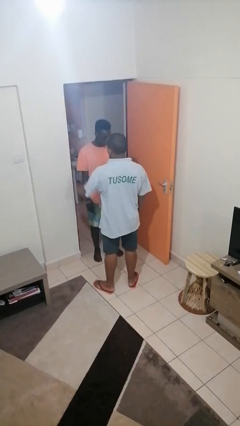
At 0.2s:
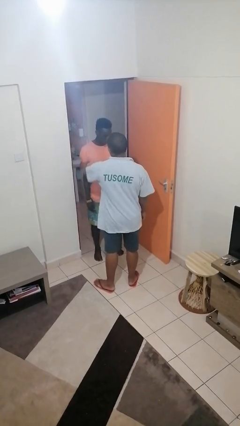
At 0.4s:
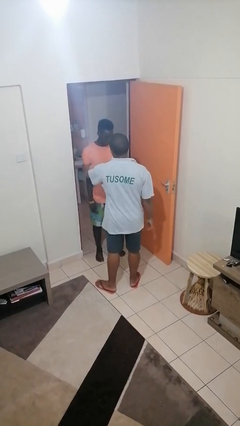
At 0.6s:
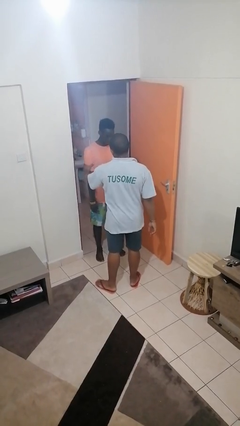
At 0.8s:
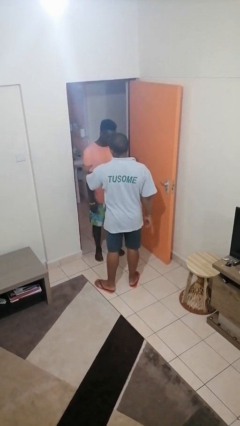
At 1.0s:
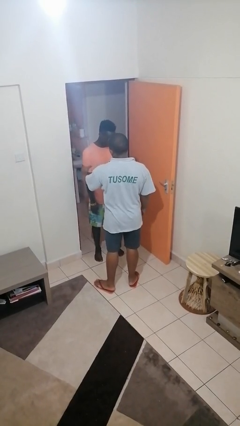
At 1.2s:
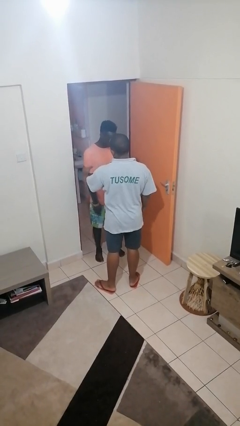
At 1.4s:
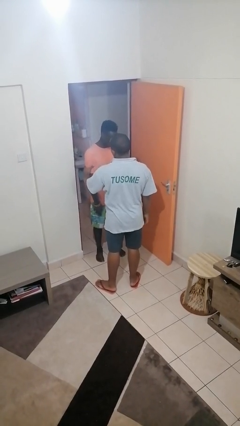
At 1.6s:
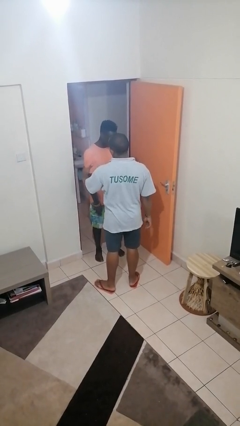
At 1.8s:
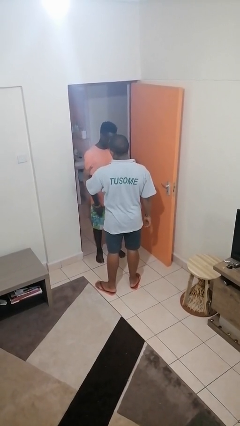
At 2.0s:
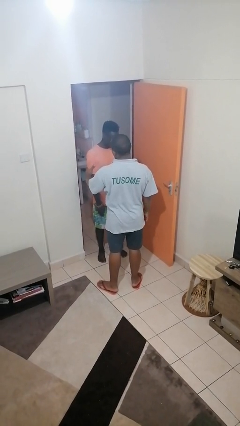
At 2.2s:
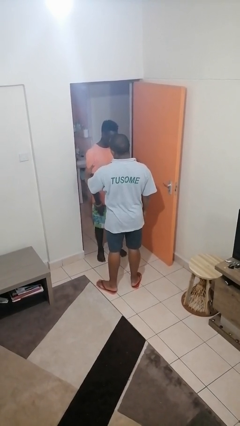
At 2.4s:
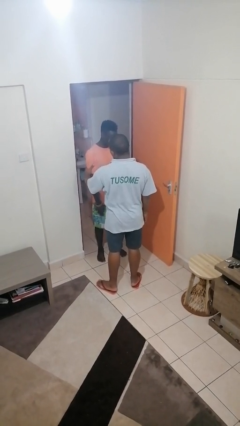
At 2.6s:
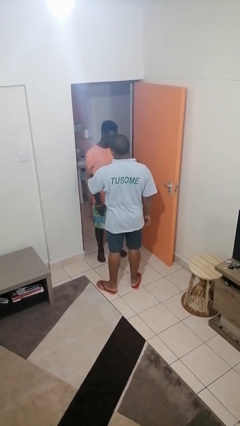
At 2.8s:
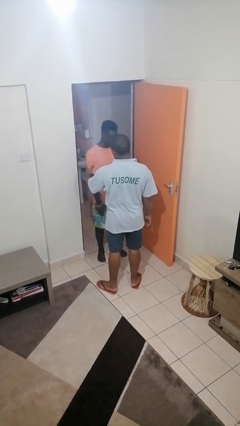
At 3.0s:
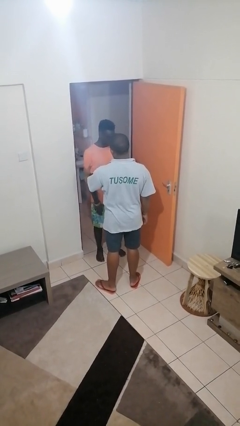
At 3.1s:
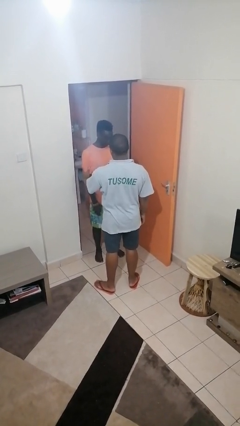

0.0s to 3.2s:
person grabs person by bicep

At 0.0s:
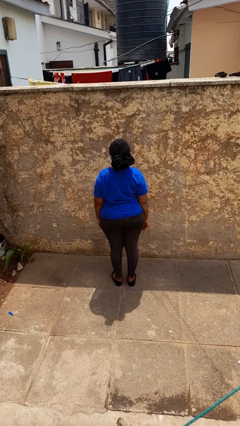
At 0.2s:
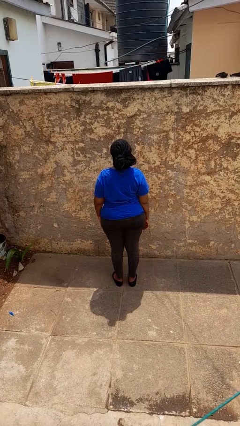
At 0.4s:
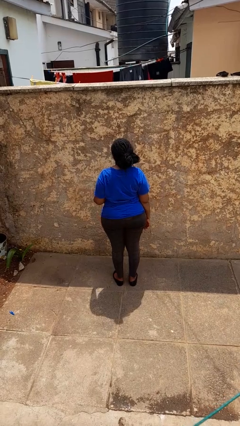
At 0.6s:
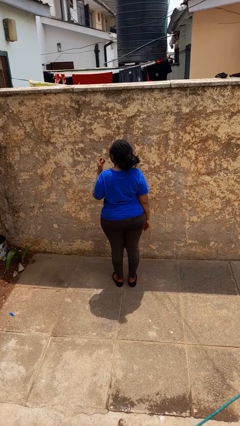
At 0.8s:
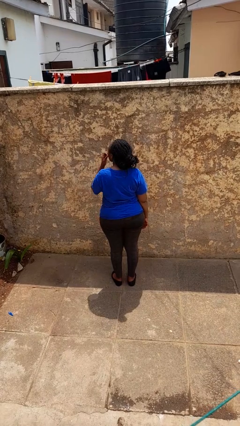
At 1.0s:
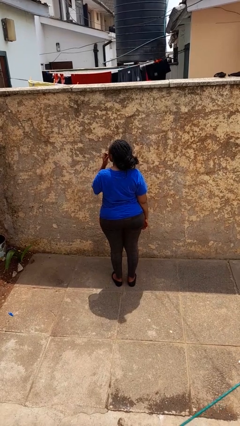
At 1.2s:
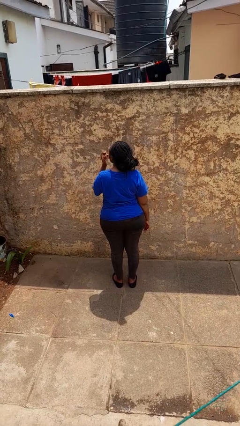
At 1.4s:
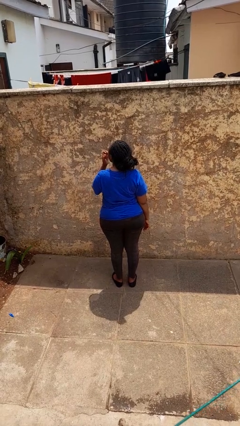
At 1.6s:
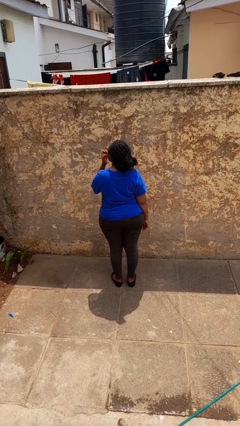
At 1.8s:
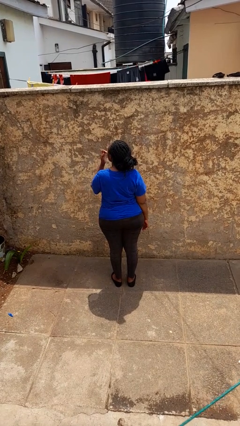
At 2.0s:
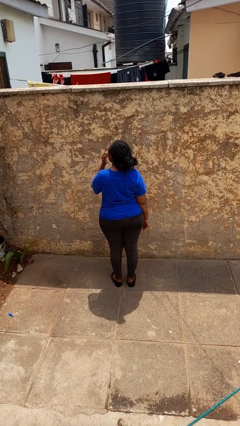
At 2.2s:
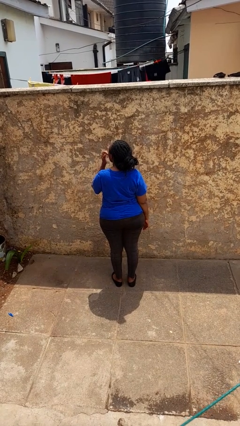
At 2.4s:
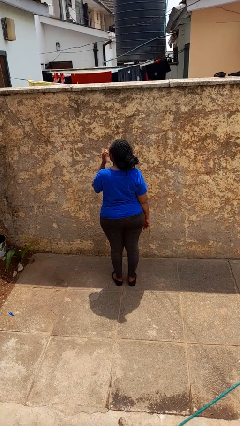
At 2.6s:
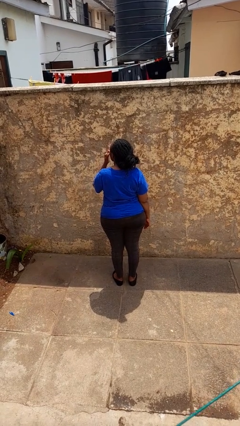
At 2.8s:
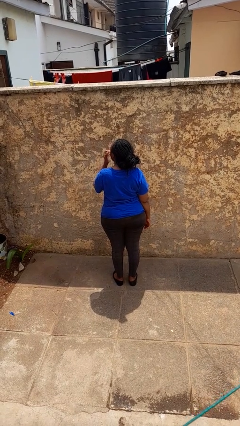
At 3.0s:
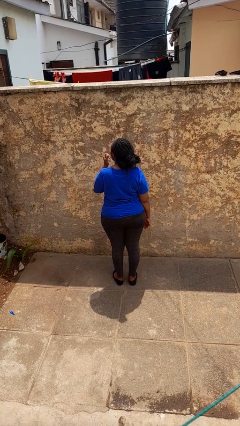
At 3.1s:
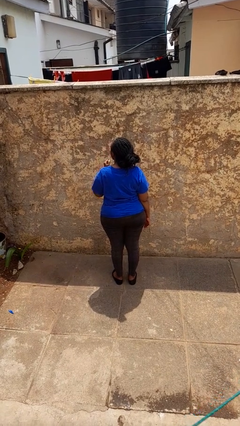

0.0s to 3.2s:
person licks fingers

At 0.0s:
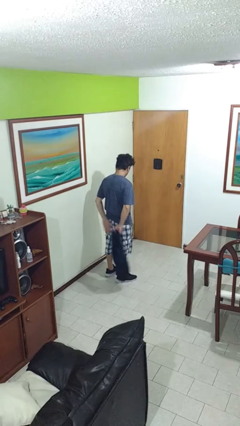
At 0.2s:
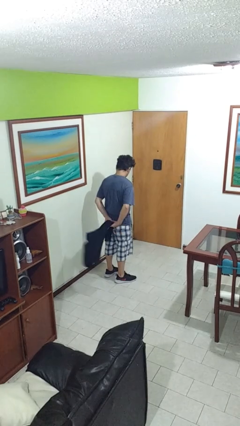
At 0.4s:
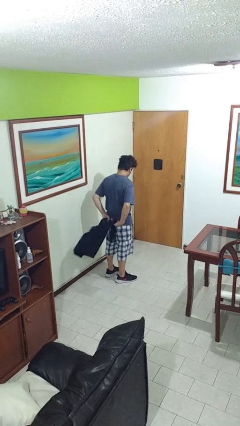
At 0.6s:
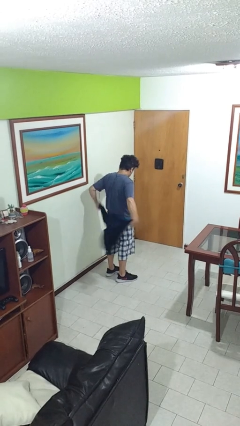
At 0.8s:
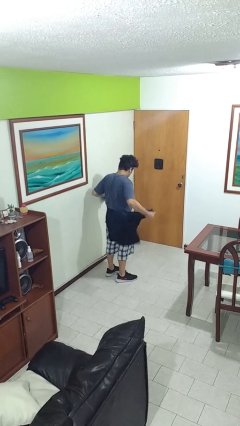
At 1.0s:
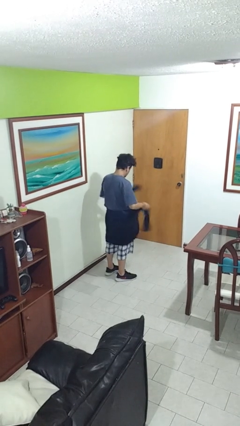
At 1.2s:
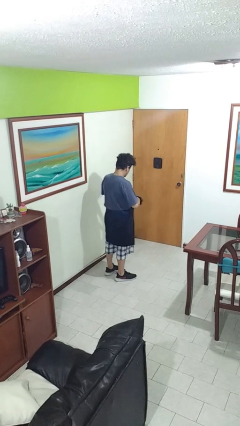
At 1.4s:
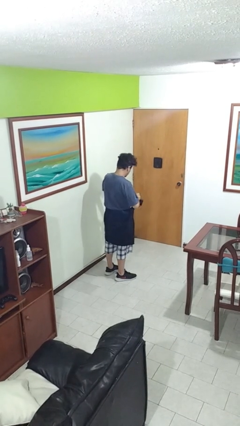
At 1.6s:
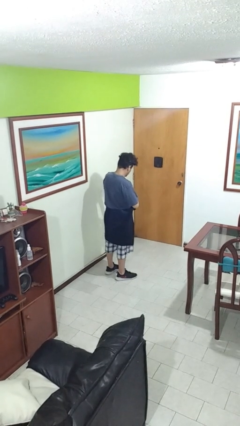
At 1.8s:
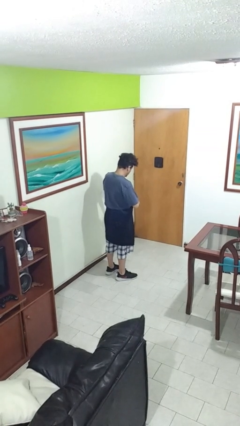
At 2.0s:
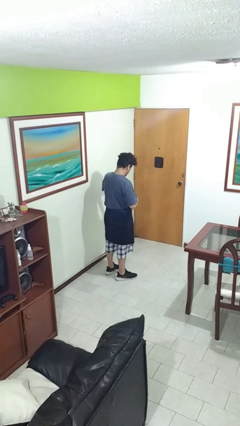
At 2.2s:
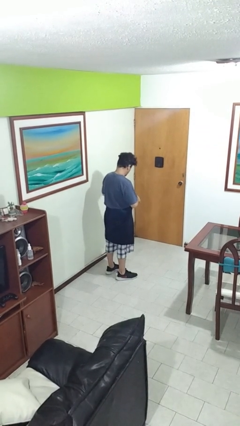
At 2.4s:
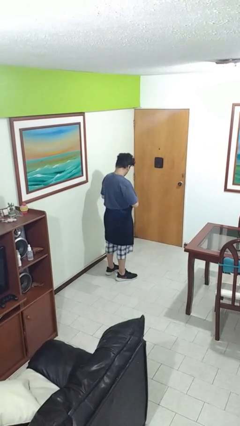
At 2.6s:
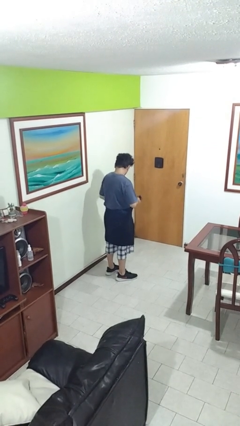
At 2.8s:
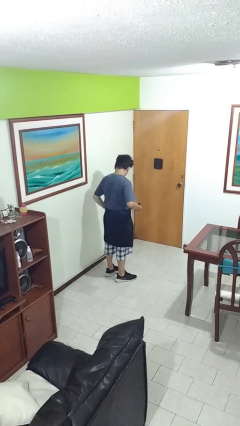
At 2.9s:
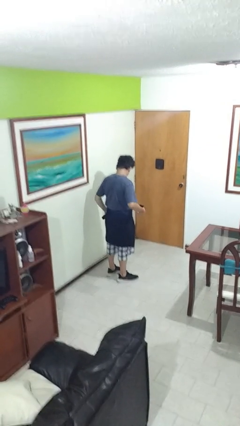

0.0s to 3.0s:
person ties jacket around waist

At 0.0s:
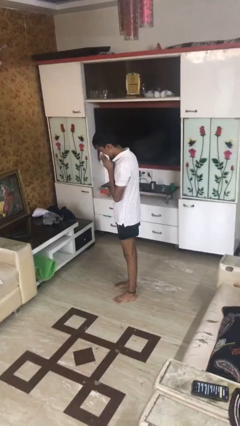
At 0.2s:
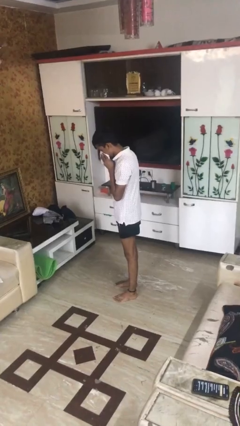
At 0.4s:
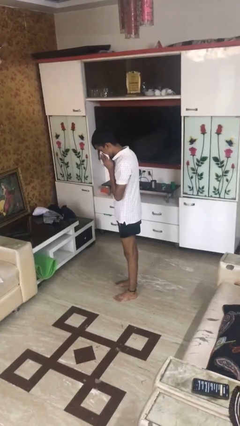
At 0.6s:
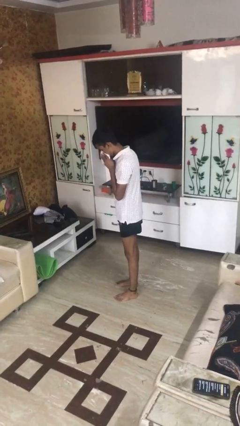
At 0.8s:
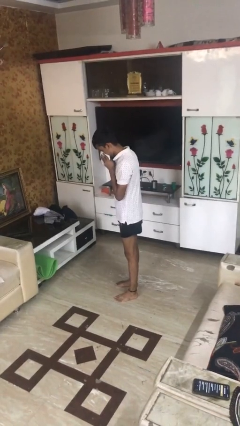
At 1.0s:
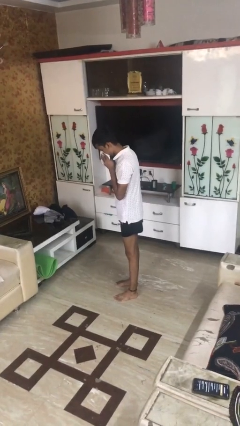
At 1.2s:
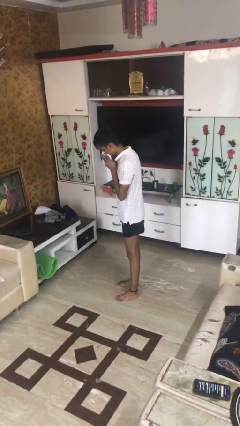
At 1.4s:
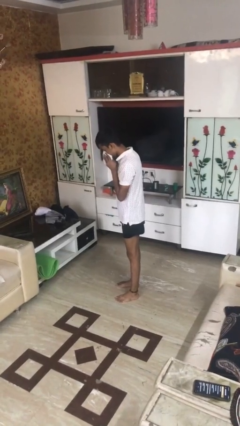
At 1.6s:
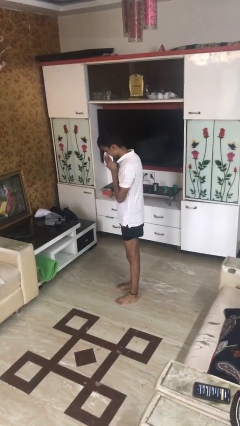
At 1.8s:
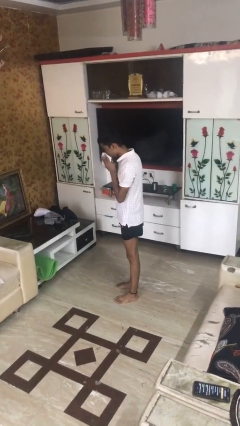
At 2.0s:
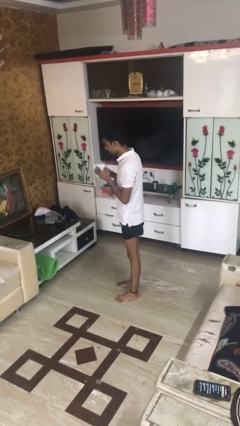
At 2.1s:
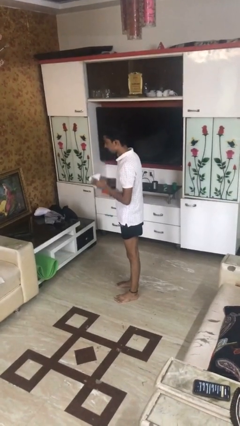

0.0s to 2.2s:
person blows nose

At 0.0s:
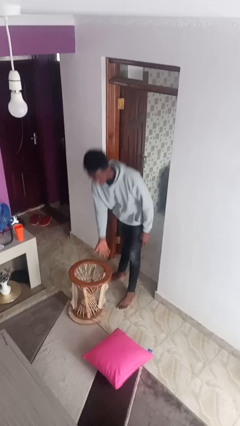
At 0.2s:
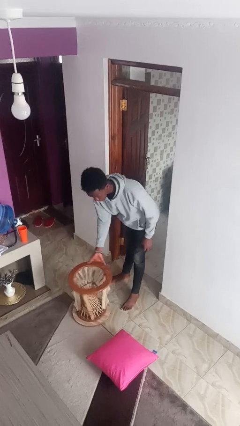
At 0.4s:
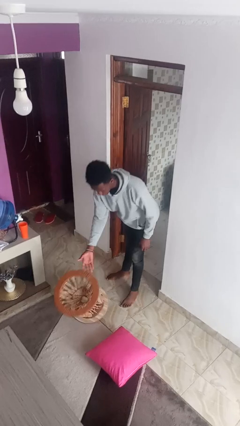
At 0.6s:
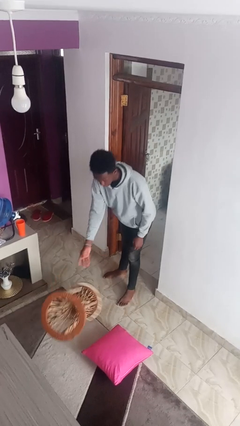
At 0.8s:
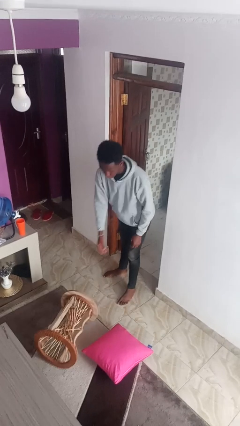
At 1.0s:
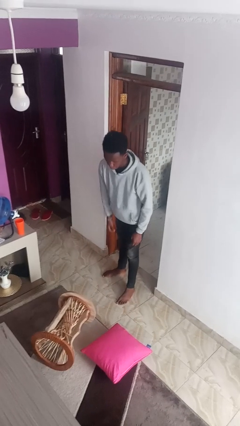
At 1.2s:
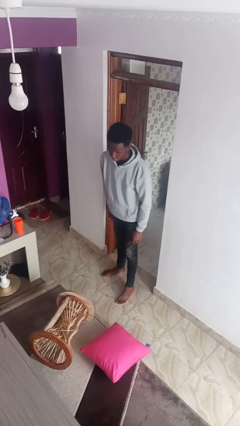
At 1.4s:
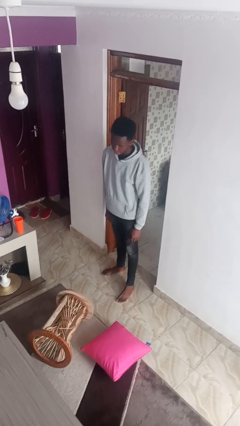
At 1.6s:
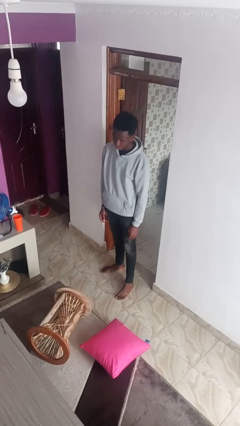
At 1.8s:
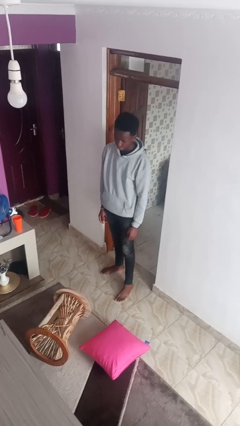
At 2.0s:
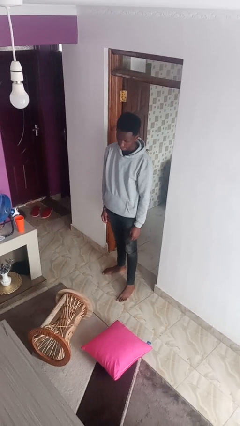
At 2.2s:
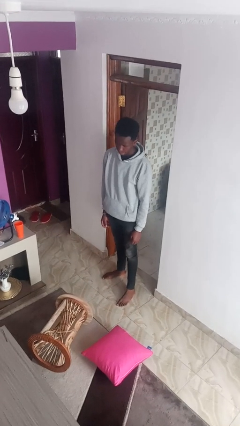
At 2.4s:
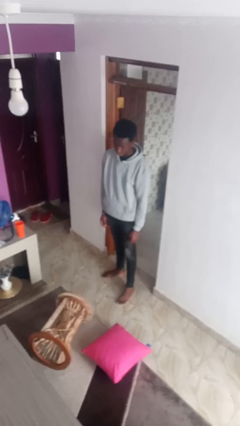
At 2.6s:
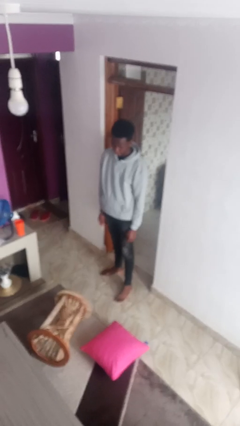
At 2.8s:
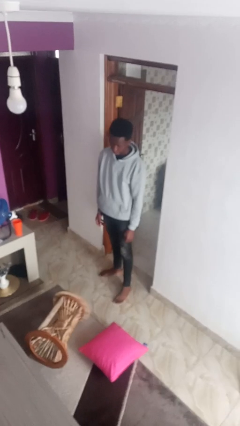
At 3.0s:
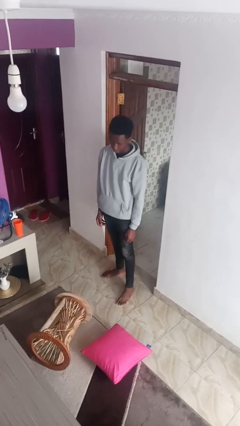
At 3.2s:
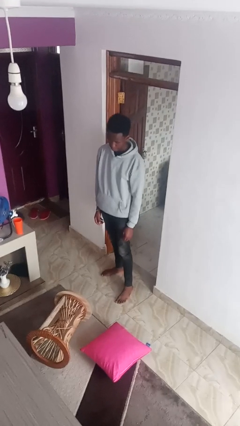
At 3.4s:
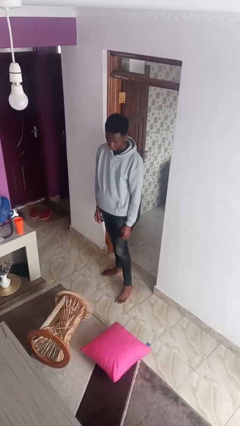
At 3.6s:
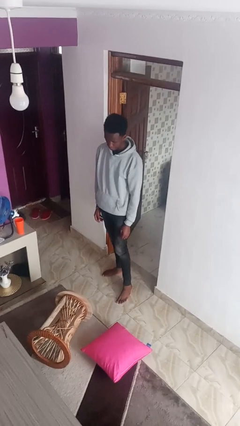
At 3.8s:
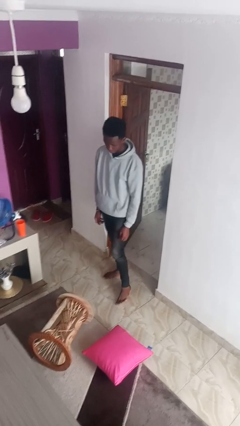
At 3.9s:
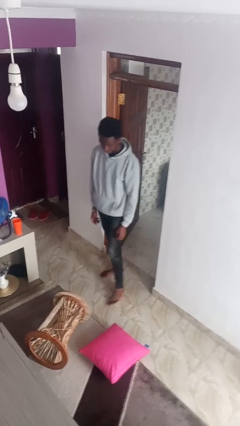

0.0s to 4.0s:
person knocks over furniture

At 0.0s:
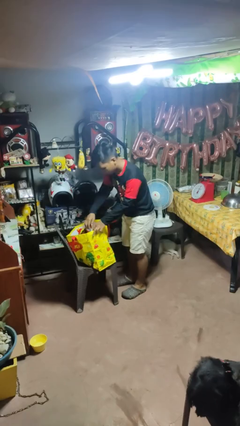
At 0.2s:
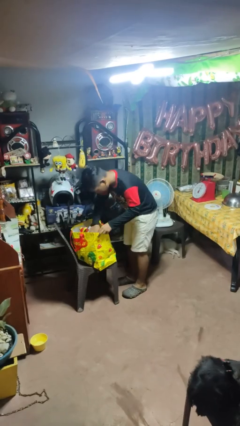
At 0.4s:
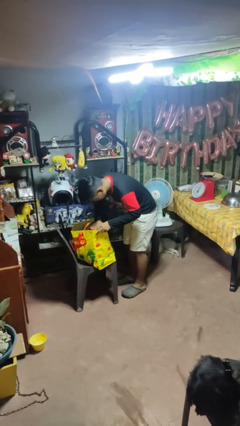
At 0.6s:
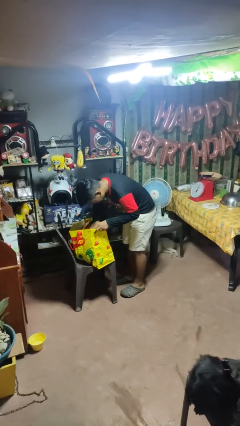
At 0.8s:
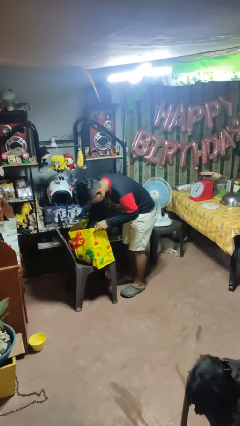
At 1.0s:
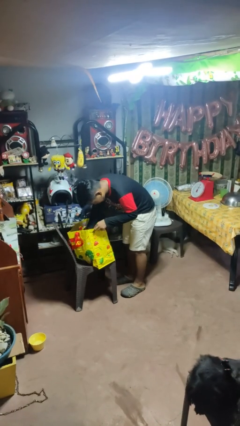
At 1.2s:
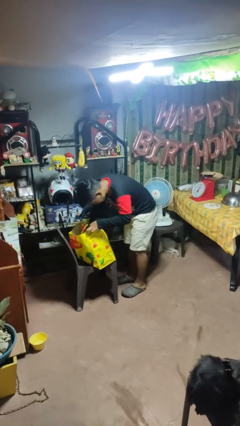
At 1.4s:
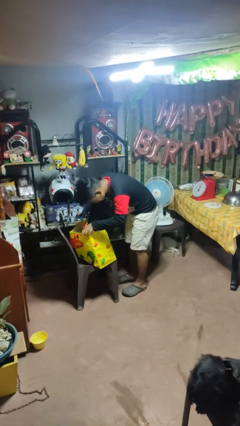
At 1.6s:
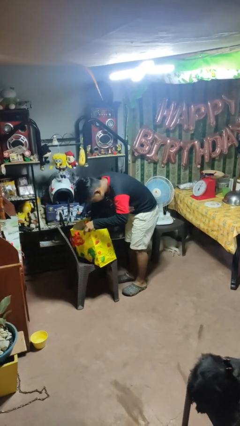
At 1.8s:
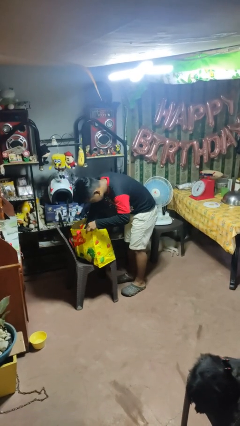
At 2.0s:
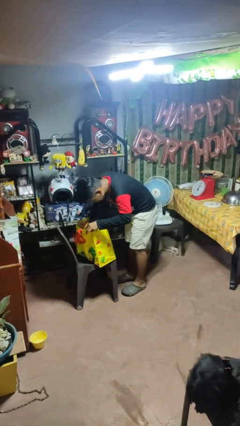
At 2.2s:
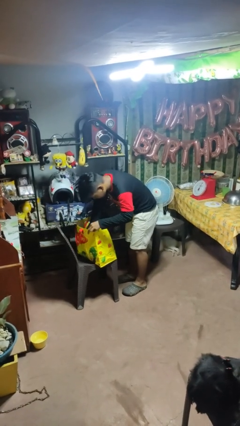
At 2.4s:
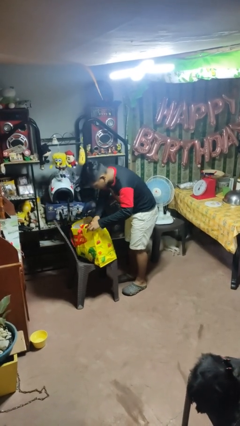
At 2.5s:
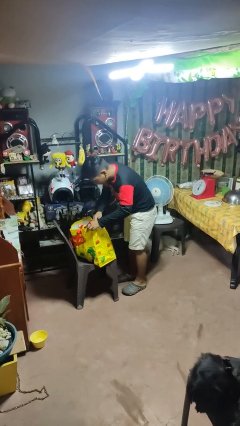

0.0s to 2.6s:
person searches in bag
